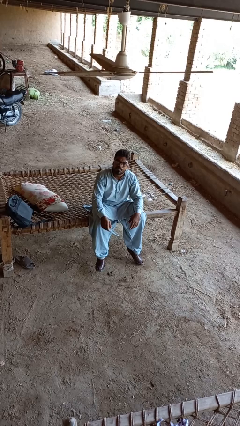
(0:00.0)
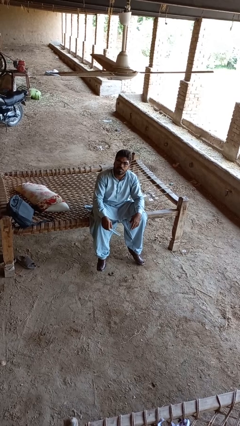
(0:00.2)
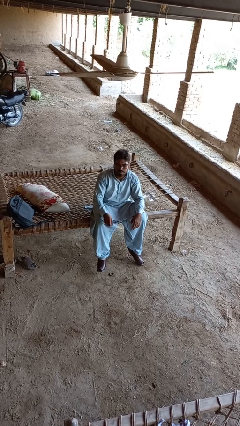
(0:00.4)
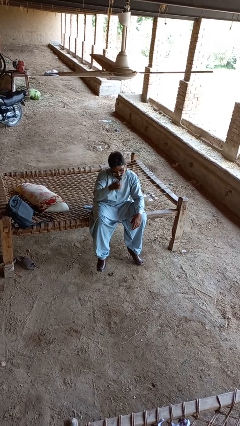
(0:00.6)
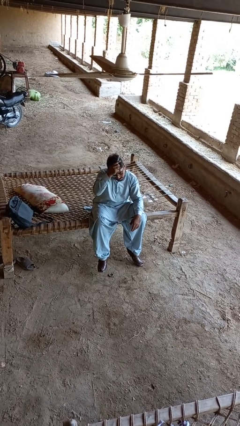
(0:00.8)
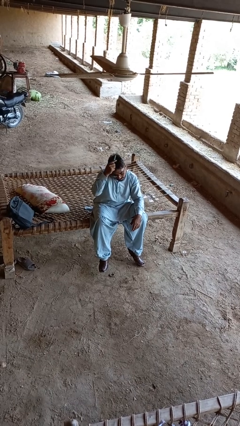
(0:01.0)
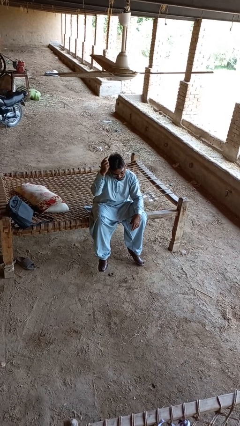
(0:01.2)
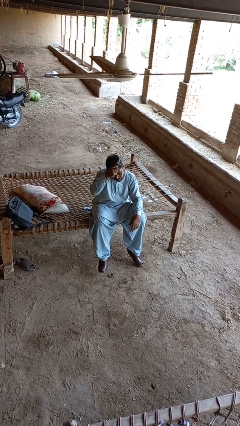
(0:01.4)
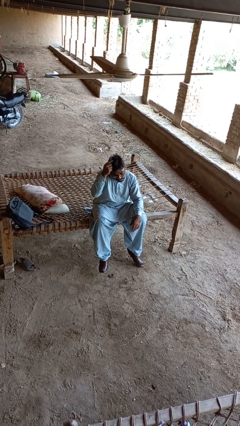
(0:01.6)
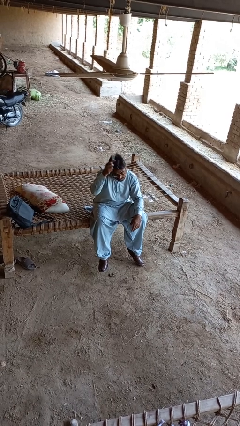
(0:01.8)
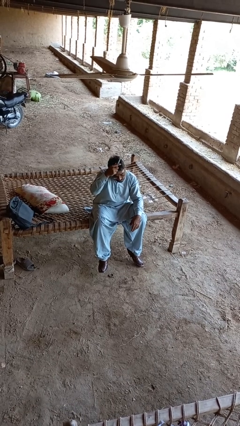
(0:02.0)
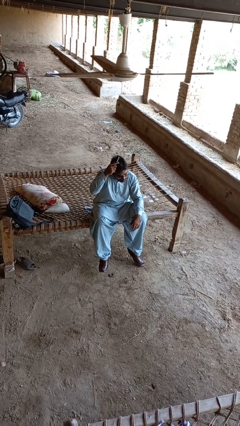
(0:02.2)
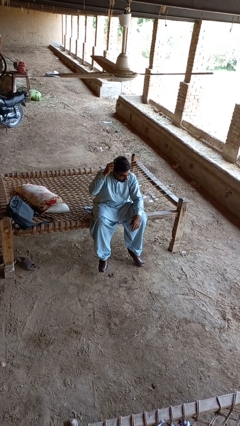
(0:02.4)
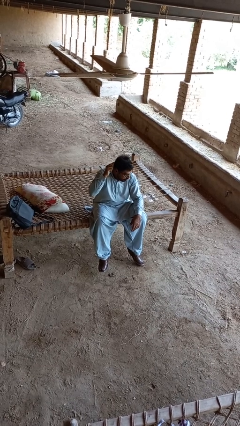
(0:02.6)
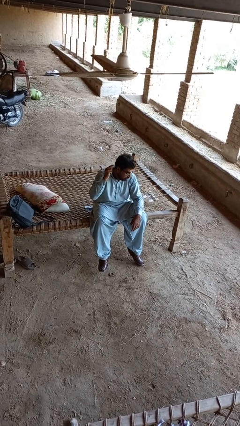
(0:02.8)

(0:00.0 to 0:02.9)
person brushes hair

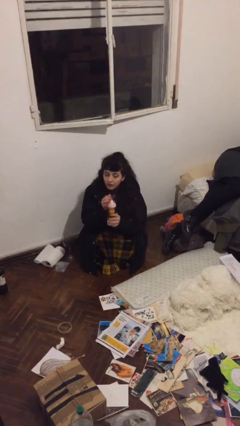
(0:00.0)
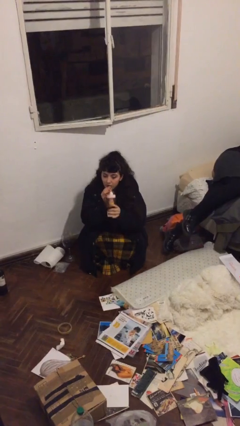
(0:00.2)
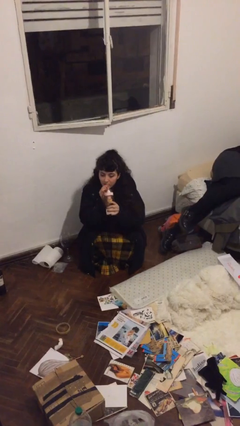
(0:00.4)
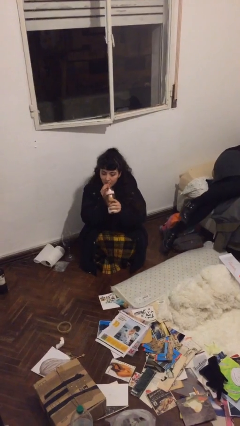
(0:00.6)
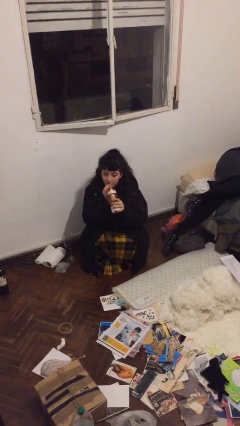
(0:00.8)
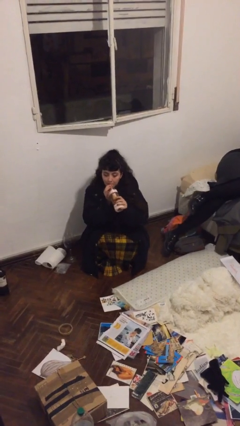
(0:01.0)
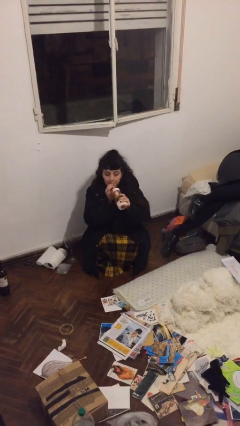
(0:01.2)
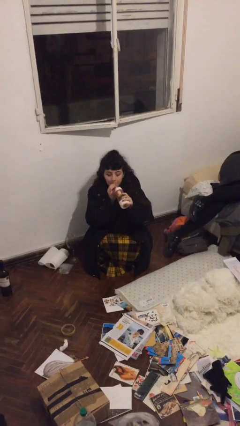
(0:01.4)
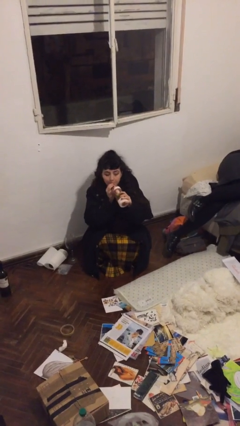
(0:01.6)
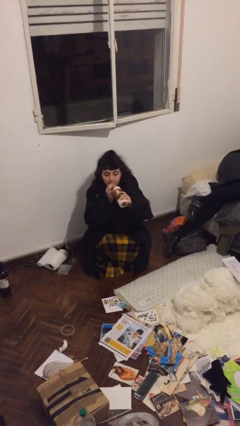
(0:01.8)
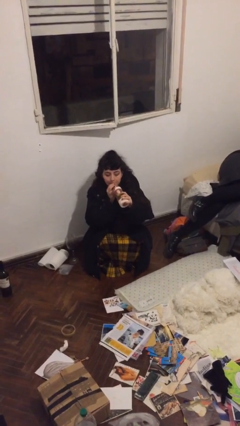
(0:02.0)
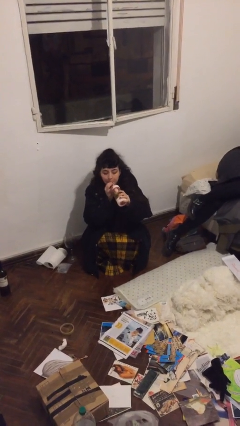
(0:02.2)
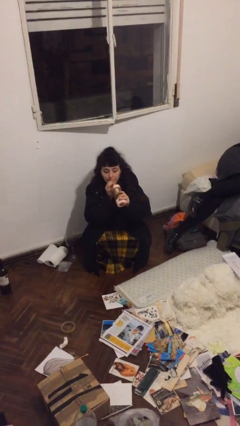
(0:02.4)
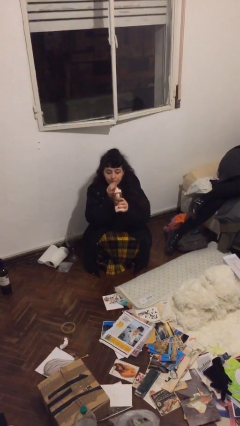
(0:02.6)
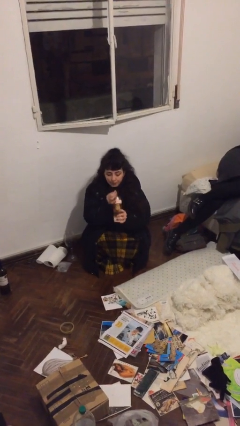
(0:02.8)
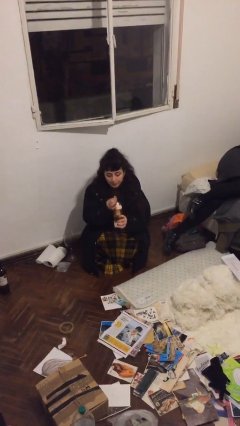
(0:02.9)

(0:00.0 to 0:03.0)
person drinks from straw

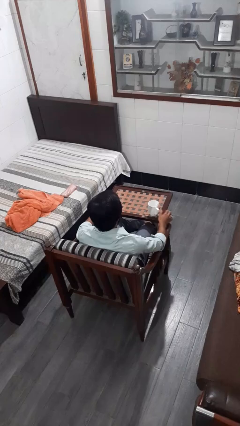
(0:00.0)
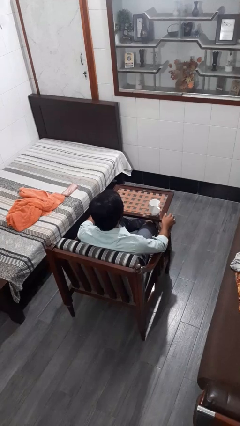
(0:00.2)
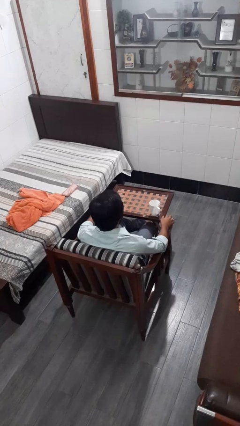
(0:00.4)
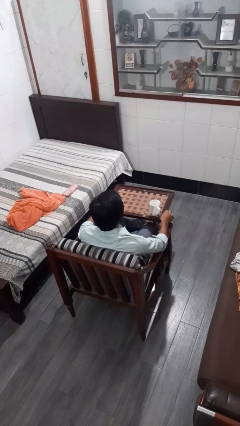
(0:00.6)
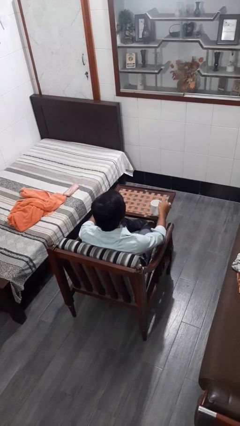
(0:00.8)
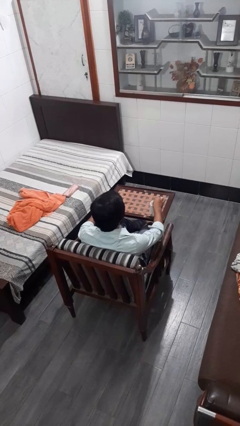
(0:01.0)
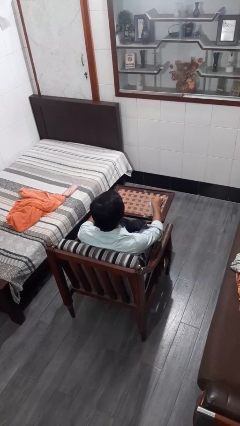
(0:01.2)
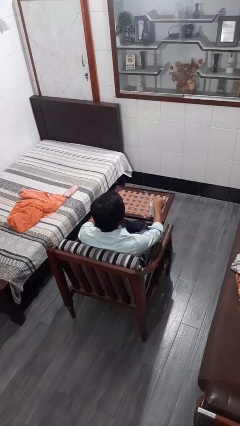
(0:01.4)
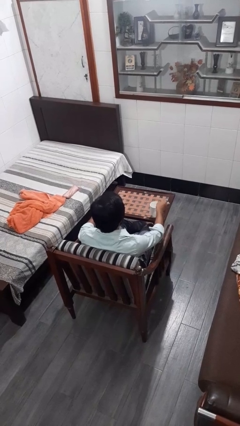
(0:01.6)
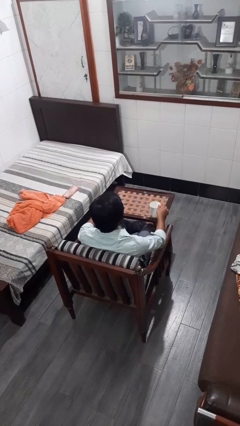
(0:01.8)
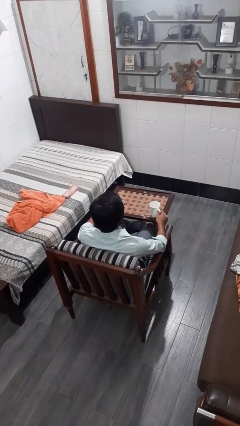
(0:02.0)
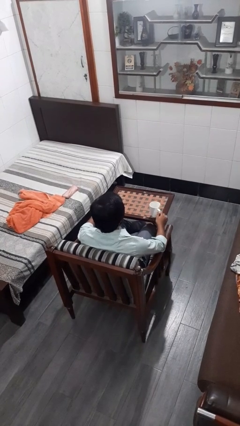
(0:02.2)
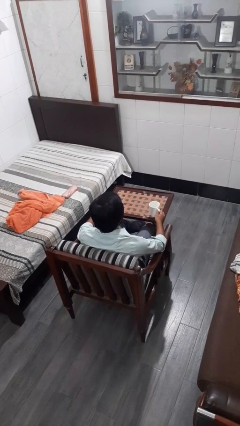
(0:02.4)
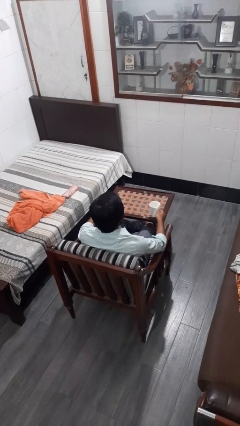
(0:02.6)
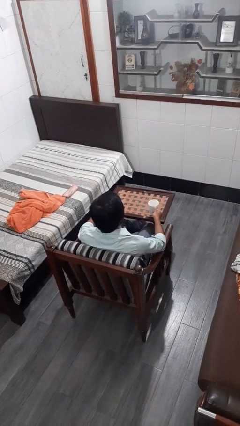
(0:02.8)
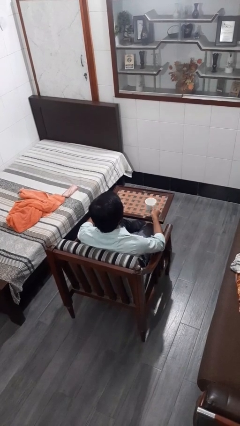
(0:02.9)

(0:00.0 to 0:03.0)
person stirs mug

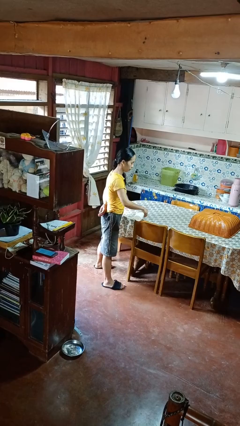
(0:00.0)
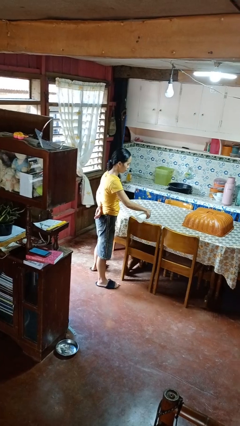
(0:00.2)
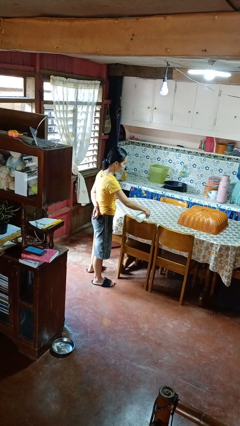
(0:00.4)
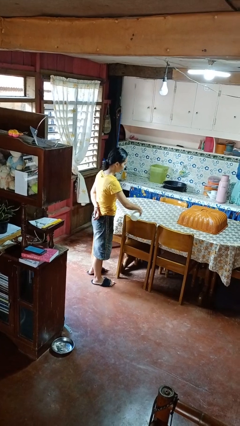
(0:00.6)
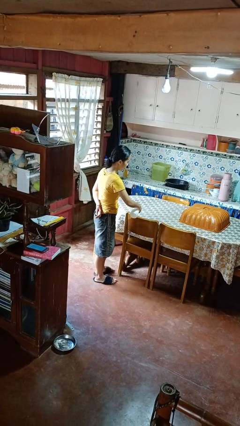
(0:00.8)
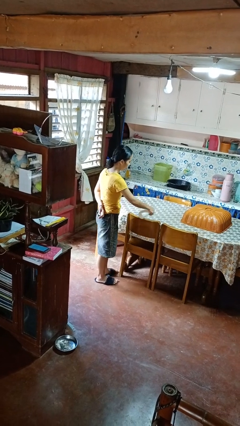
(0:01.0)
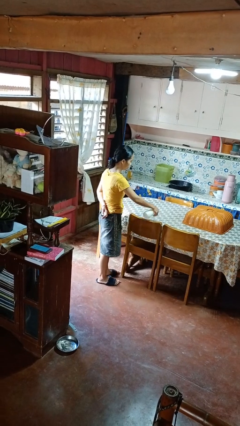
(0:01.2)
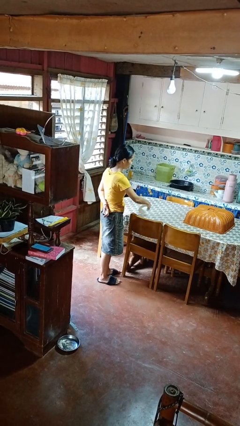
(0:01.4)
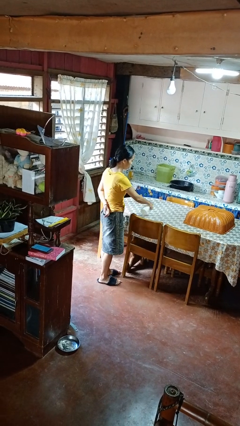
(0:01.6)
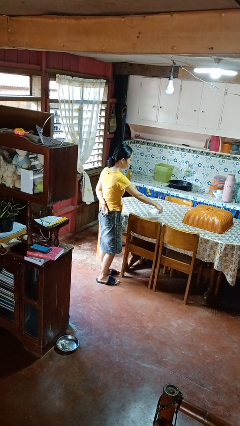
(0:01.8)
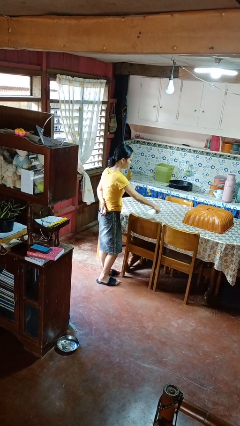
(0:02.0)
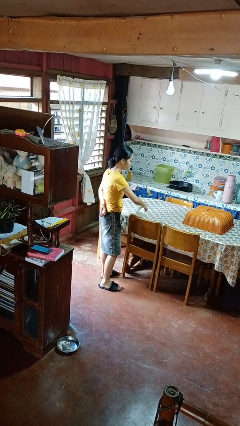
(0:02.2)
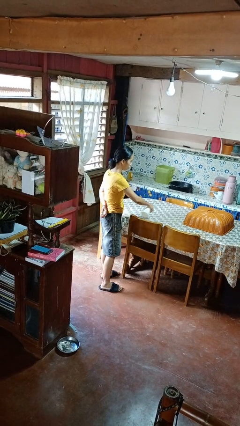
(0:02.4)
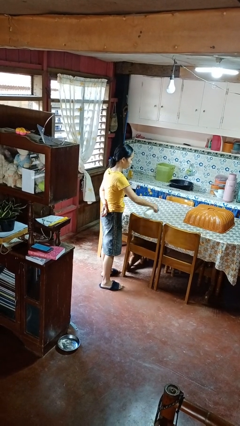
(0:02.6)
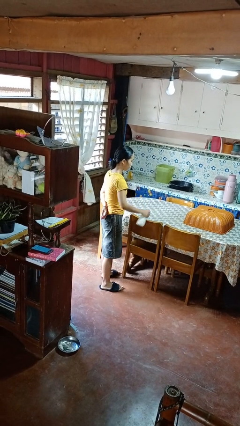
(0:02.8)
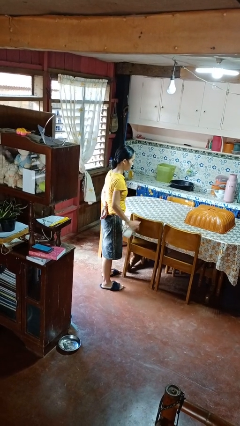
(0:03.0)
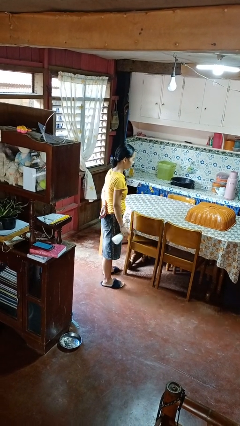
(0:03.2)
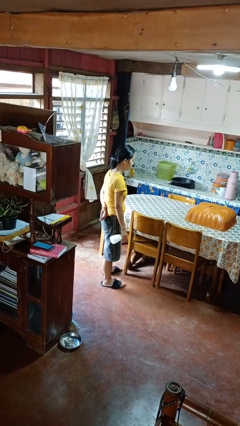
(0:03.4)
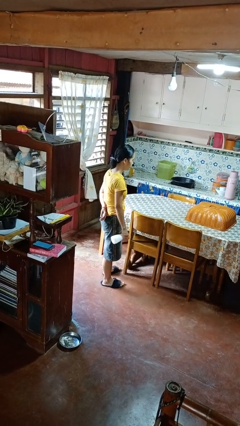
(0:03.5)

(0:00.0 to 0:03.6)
person sprays from bottle

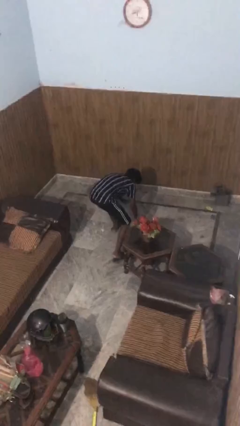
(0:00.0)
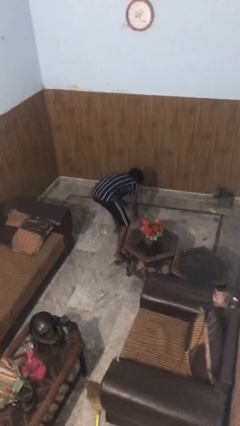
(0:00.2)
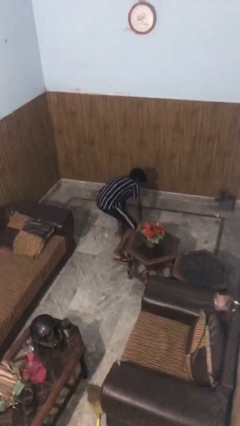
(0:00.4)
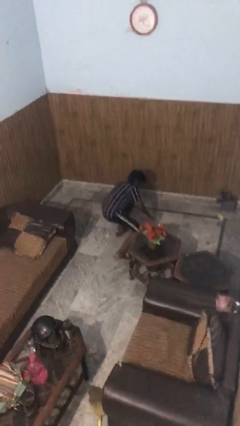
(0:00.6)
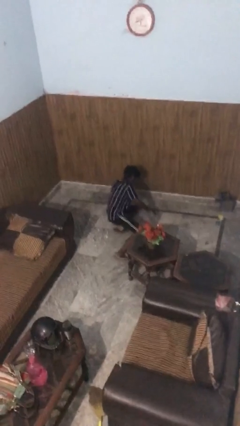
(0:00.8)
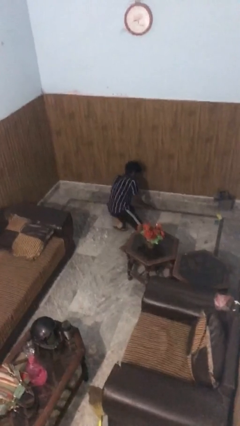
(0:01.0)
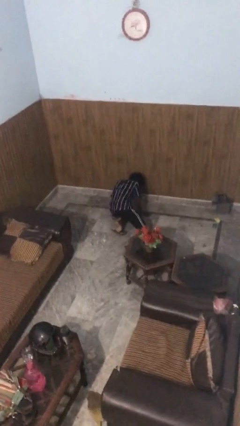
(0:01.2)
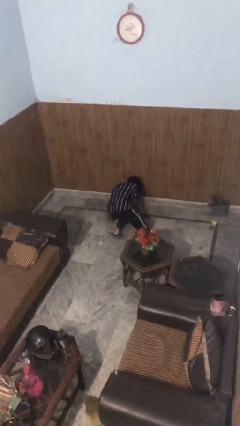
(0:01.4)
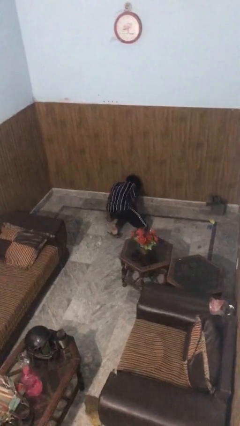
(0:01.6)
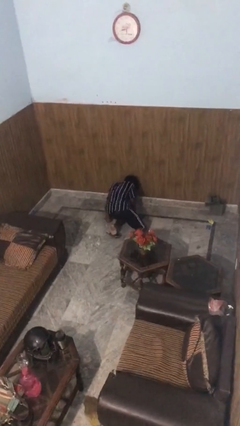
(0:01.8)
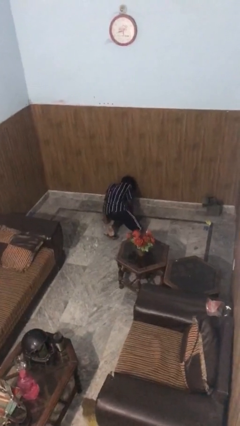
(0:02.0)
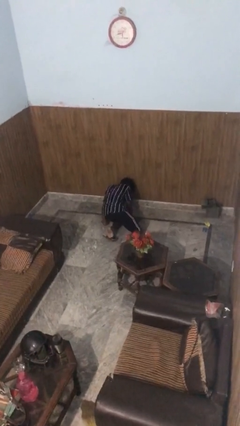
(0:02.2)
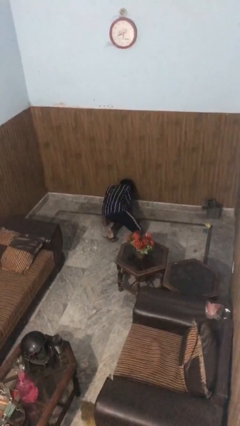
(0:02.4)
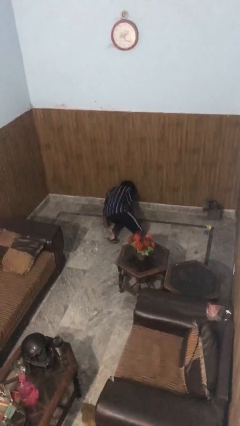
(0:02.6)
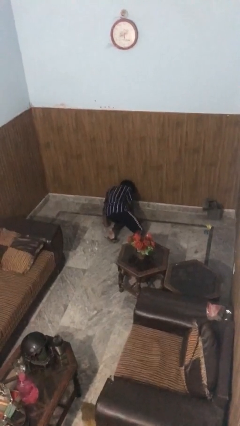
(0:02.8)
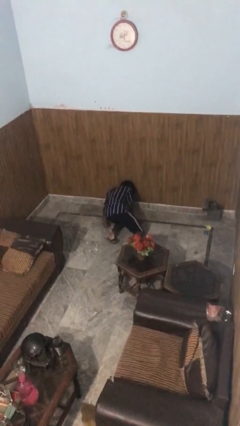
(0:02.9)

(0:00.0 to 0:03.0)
person lies down on floor

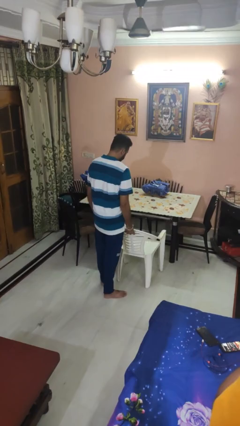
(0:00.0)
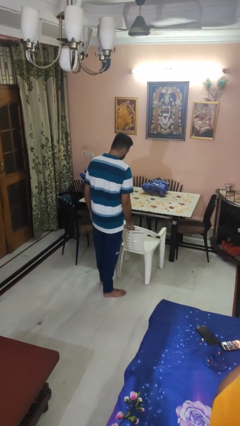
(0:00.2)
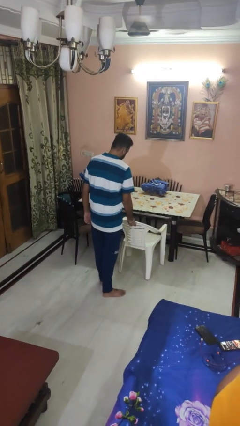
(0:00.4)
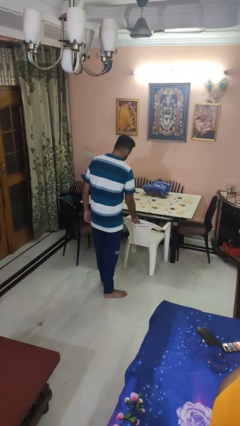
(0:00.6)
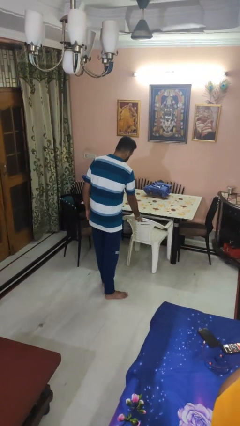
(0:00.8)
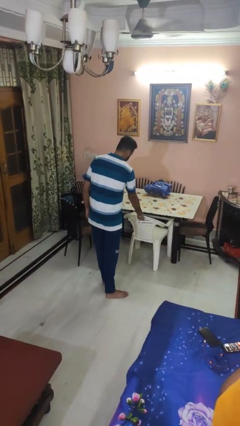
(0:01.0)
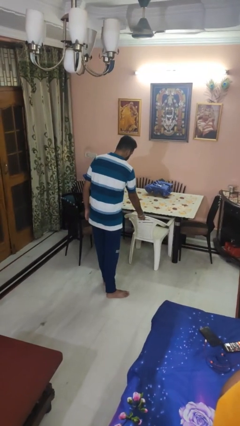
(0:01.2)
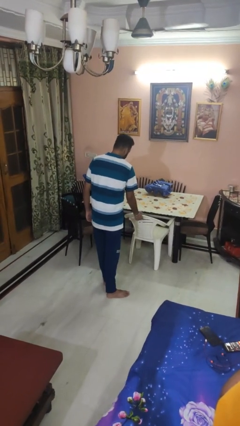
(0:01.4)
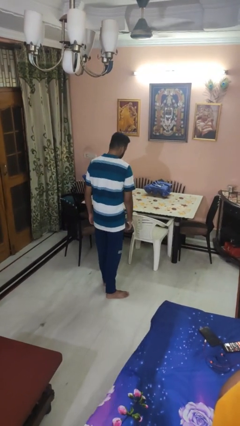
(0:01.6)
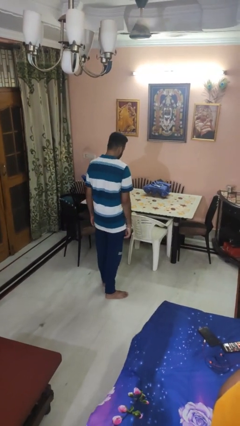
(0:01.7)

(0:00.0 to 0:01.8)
person pushes in chair

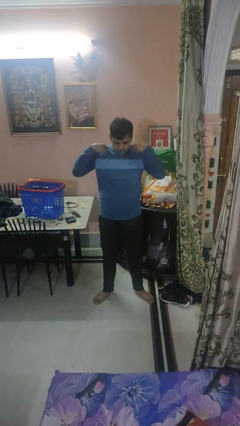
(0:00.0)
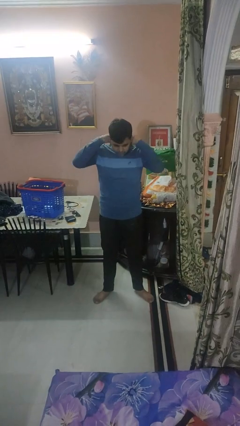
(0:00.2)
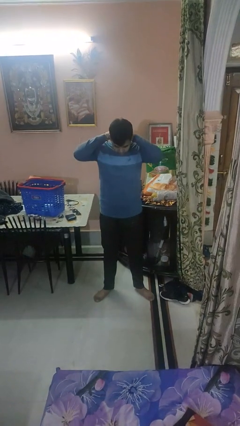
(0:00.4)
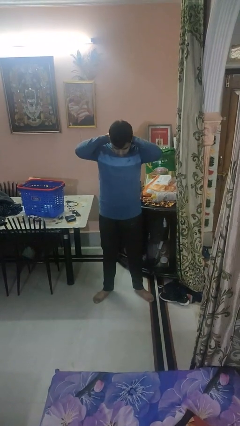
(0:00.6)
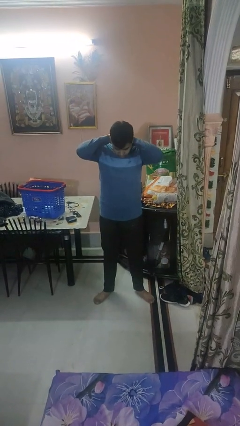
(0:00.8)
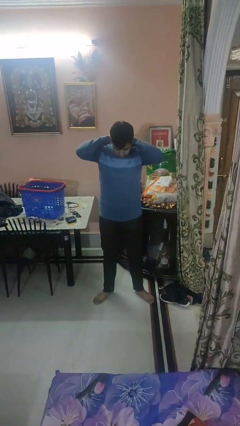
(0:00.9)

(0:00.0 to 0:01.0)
person puts on necklace
